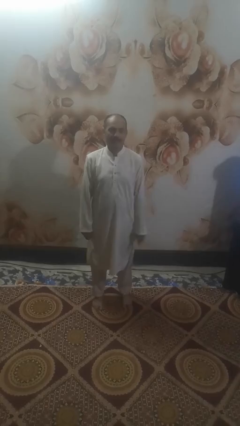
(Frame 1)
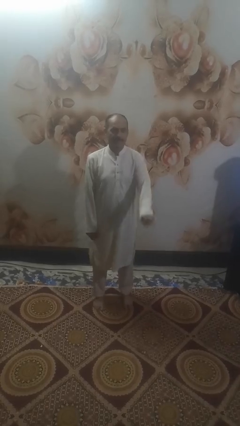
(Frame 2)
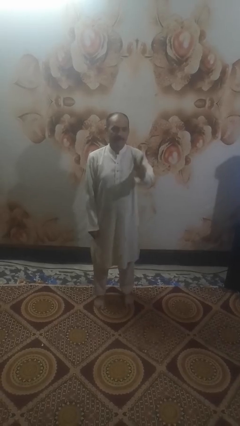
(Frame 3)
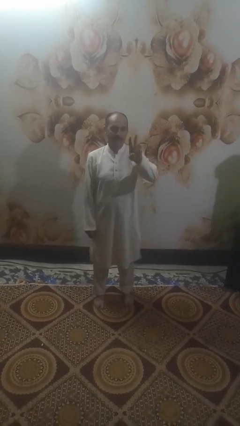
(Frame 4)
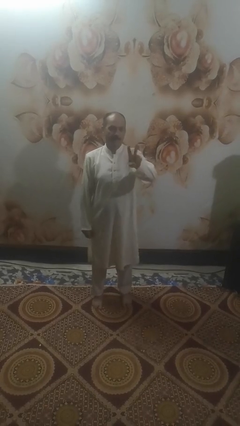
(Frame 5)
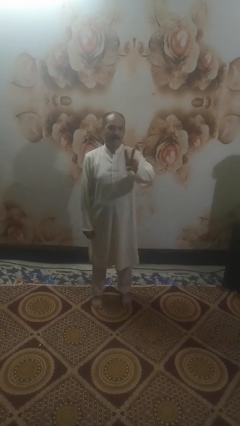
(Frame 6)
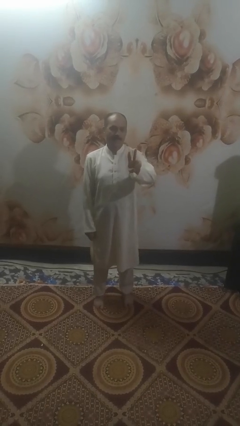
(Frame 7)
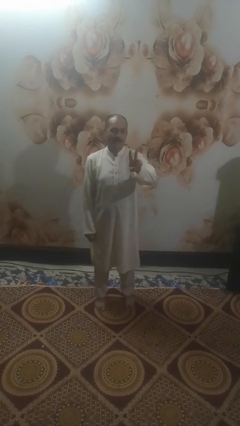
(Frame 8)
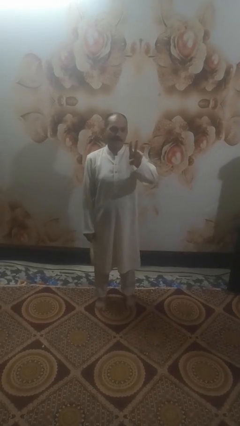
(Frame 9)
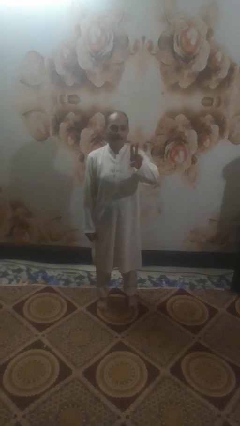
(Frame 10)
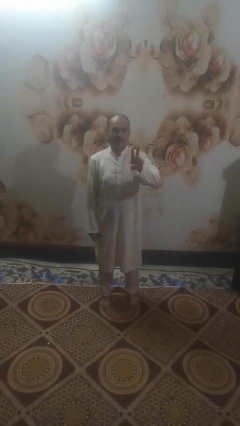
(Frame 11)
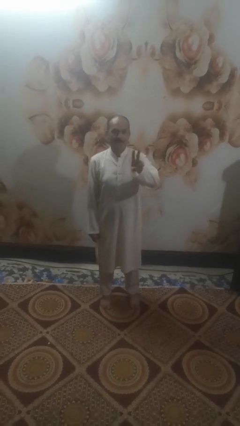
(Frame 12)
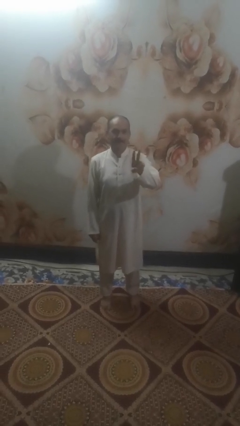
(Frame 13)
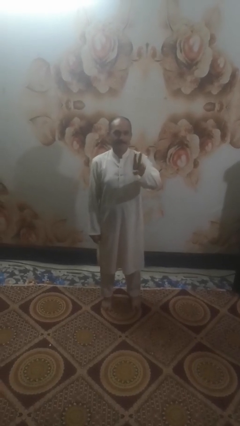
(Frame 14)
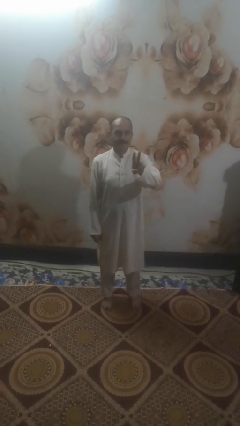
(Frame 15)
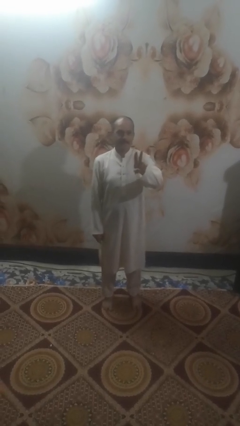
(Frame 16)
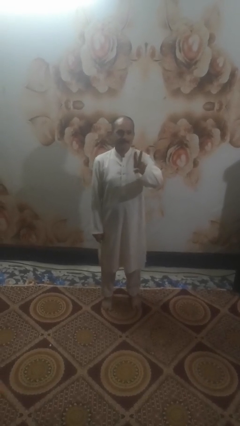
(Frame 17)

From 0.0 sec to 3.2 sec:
person gestures peace

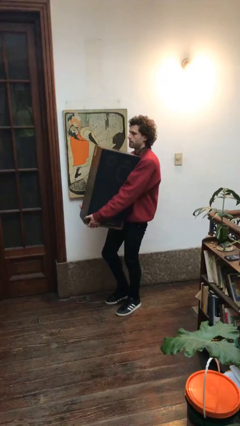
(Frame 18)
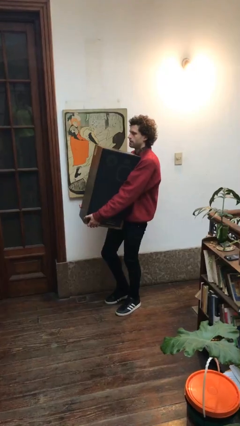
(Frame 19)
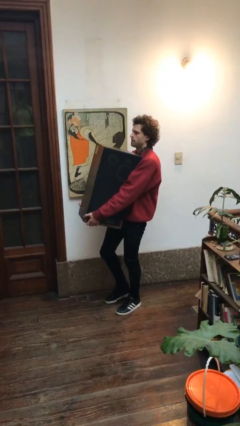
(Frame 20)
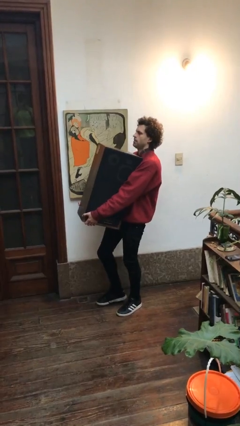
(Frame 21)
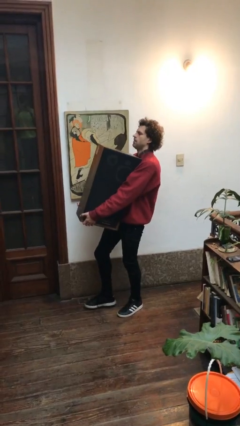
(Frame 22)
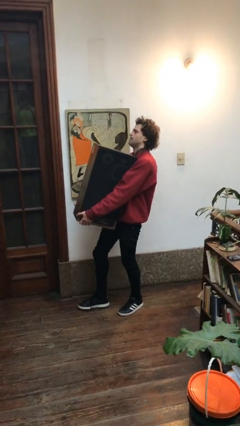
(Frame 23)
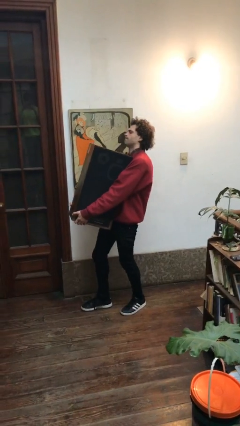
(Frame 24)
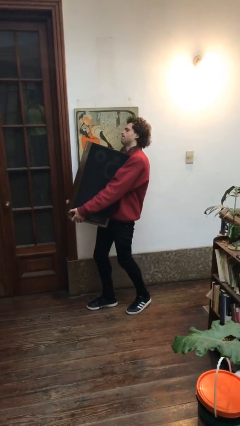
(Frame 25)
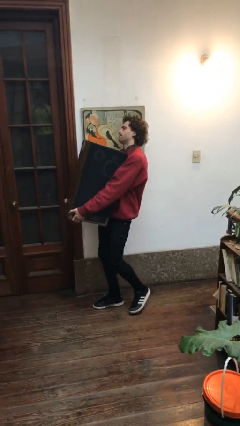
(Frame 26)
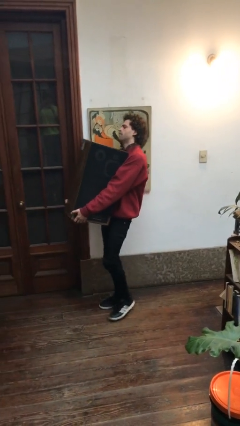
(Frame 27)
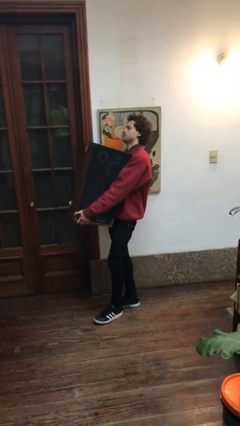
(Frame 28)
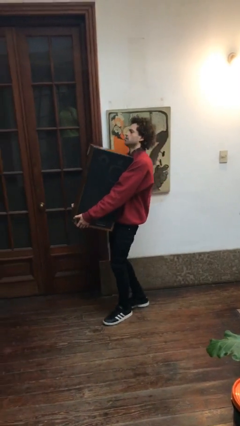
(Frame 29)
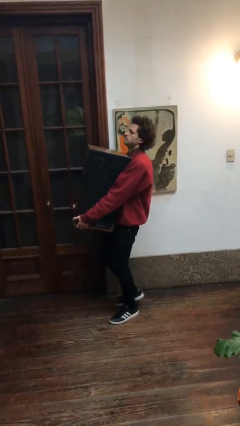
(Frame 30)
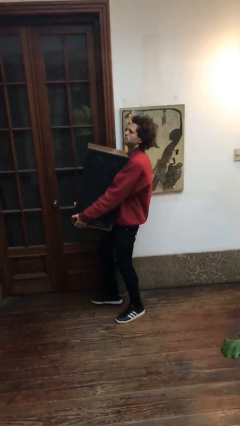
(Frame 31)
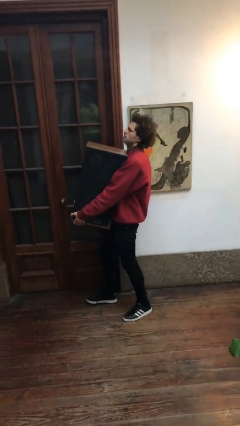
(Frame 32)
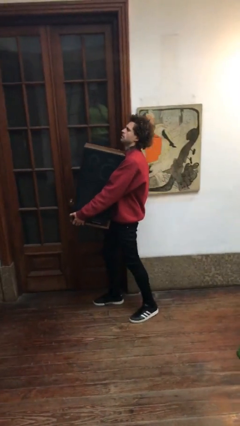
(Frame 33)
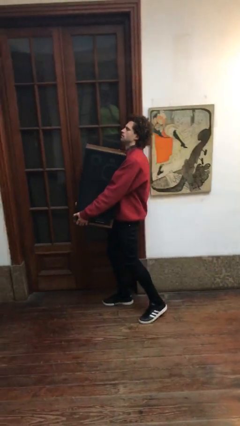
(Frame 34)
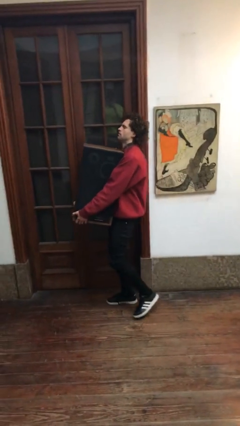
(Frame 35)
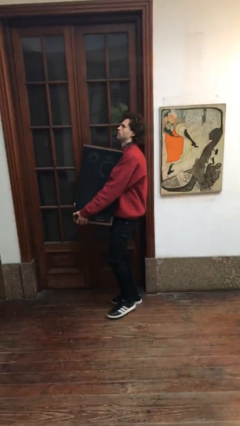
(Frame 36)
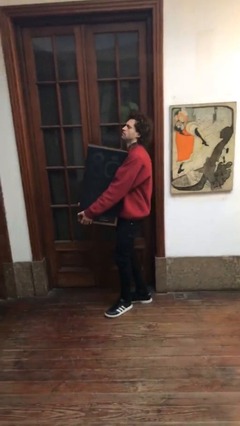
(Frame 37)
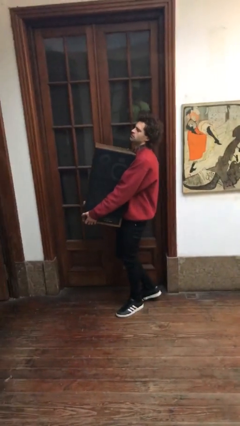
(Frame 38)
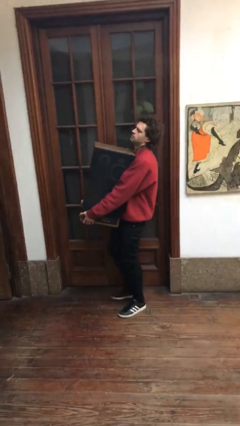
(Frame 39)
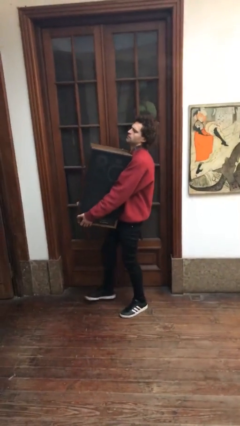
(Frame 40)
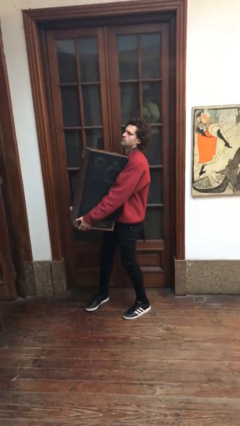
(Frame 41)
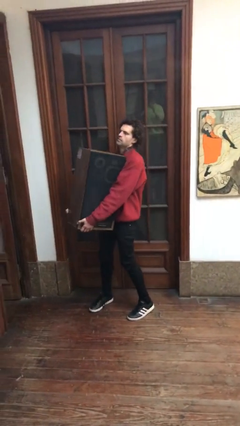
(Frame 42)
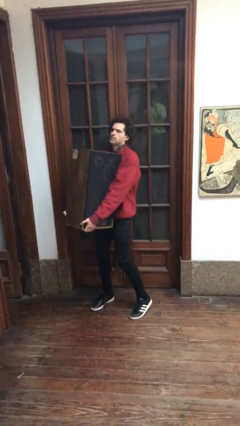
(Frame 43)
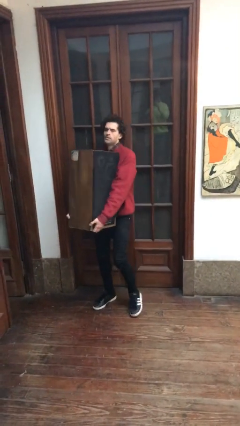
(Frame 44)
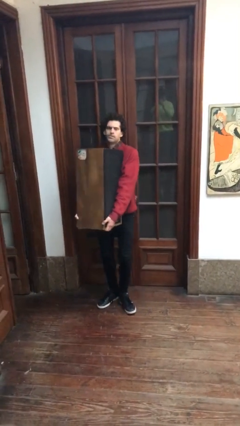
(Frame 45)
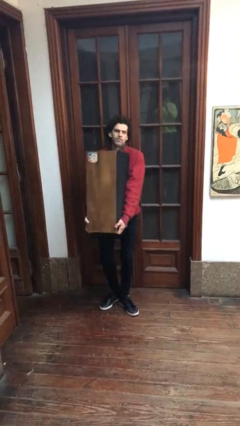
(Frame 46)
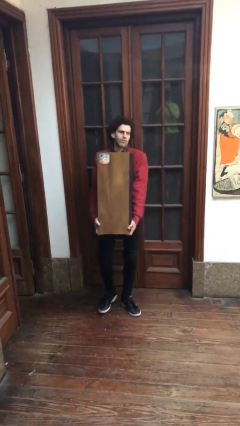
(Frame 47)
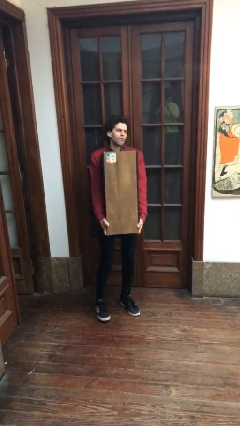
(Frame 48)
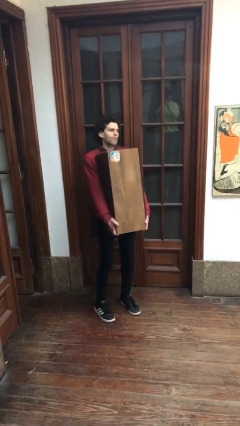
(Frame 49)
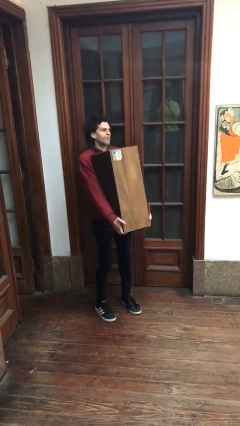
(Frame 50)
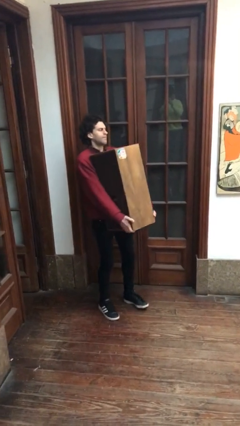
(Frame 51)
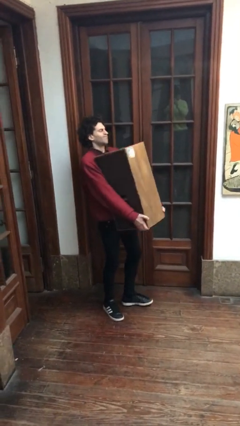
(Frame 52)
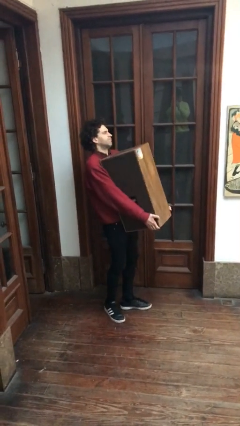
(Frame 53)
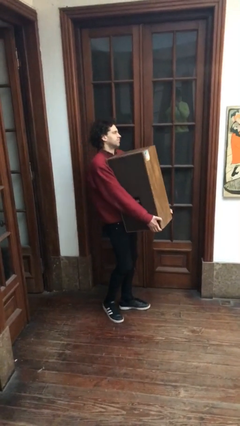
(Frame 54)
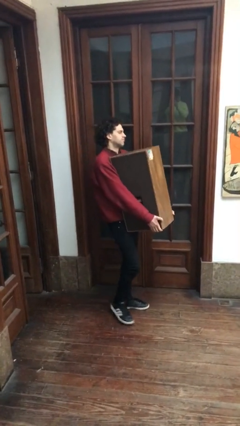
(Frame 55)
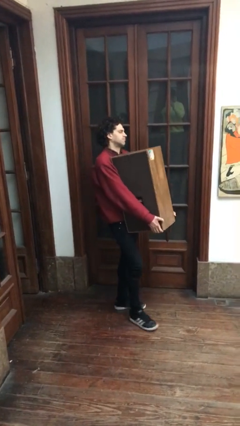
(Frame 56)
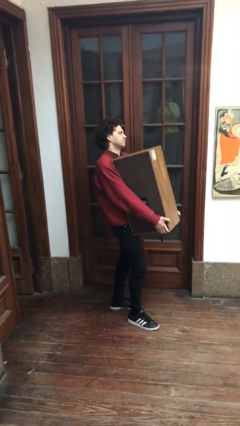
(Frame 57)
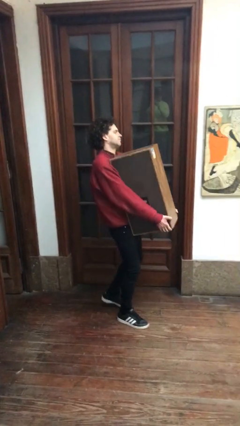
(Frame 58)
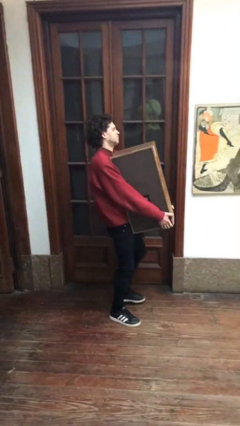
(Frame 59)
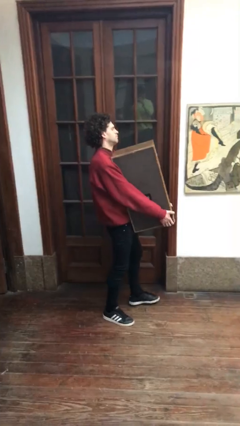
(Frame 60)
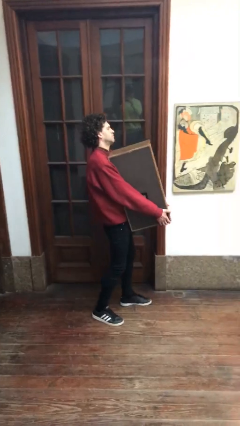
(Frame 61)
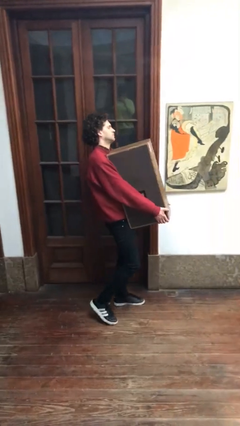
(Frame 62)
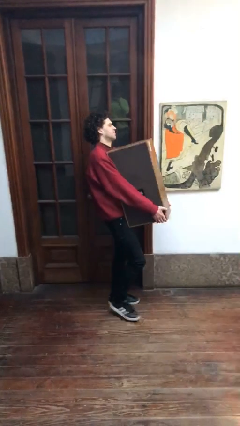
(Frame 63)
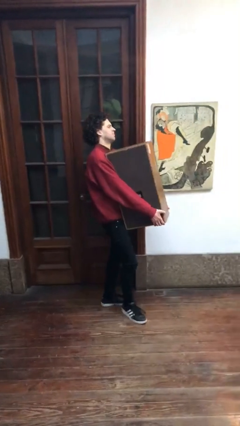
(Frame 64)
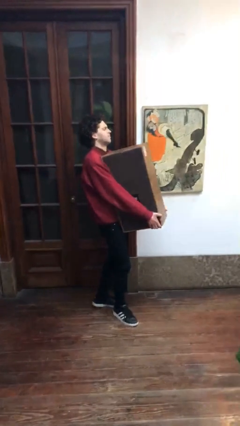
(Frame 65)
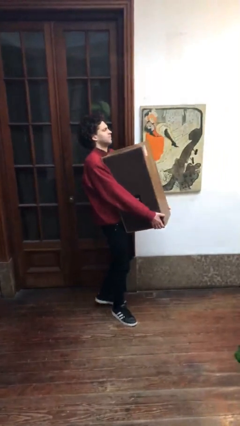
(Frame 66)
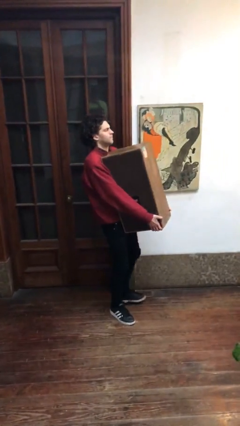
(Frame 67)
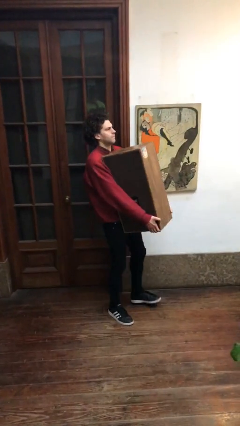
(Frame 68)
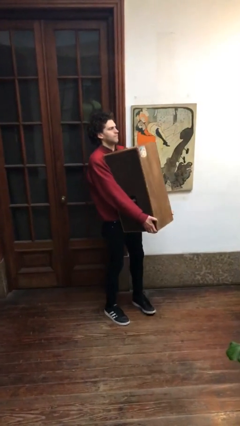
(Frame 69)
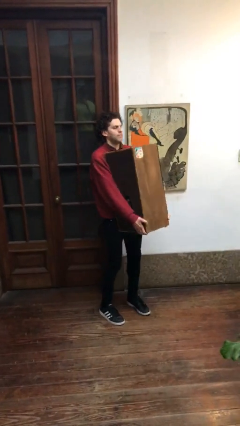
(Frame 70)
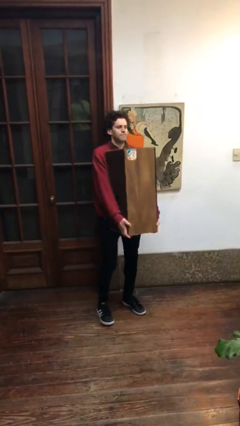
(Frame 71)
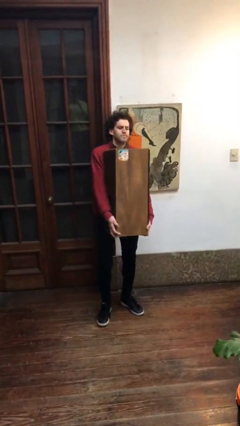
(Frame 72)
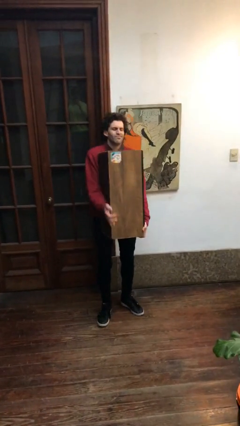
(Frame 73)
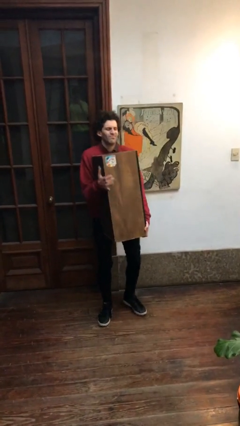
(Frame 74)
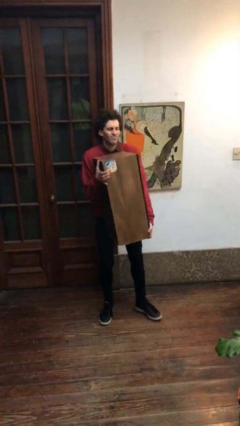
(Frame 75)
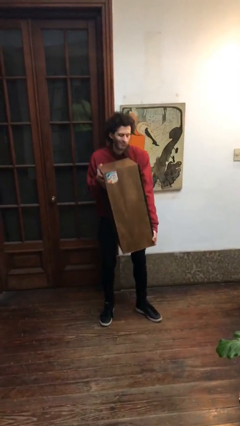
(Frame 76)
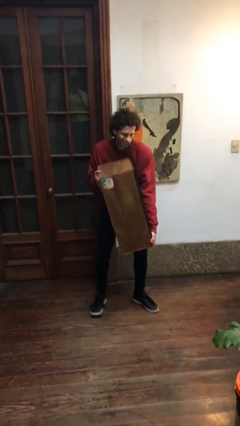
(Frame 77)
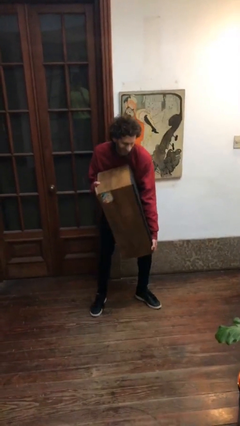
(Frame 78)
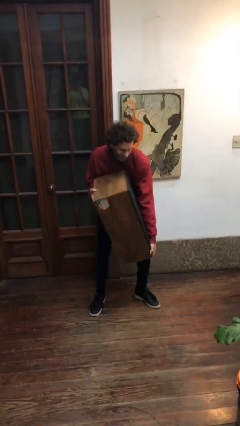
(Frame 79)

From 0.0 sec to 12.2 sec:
person carries heavy object

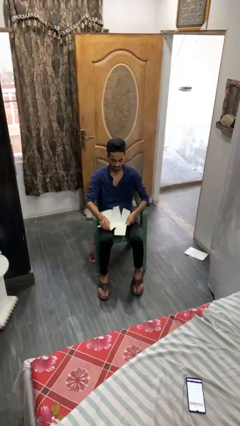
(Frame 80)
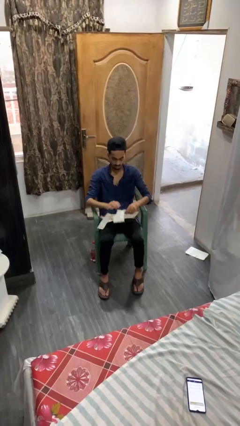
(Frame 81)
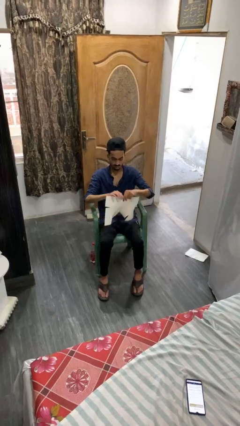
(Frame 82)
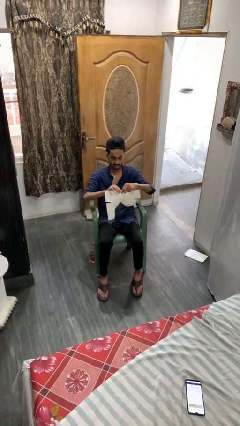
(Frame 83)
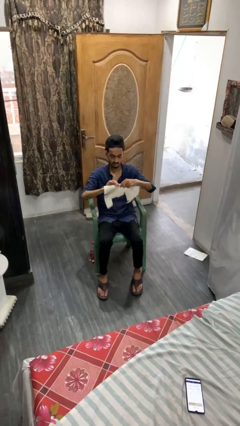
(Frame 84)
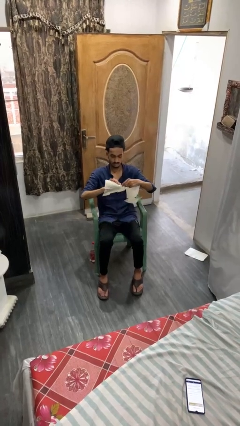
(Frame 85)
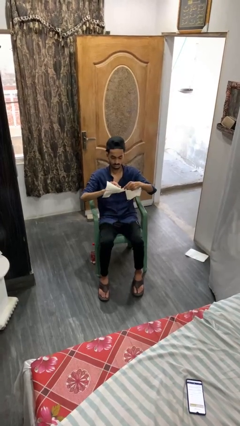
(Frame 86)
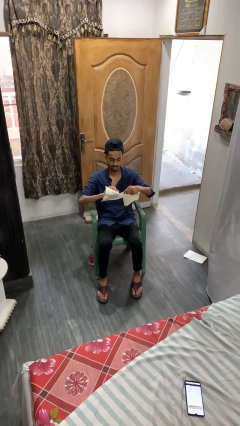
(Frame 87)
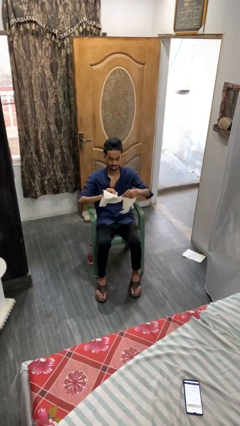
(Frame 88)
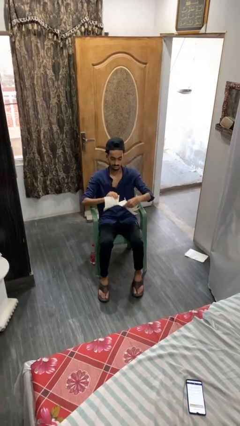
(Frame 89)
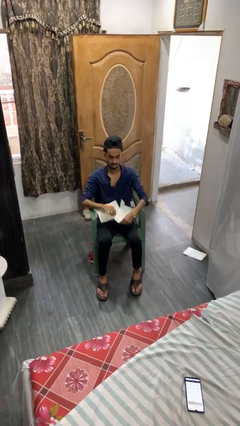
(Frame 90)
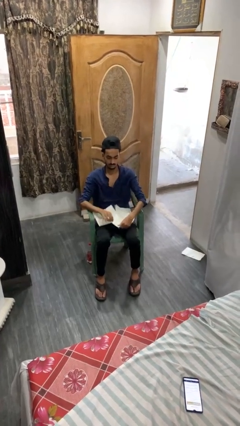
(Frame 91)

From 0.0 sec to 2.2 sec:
person tears paper

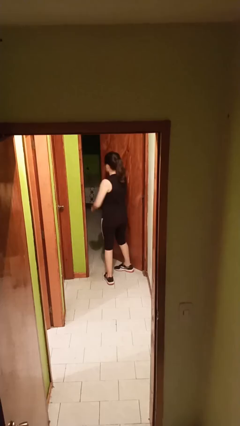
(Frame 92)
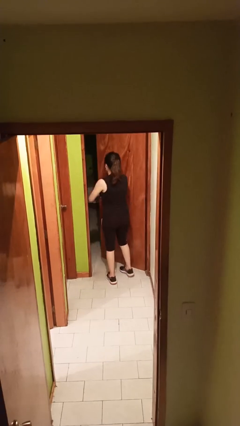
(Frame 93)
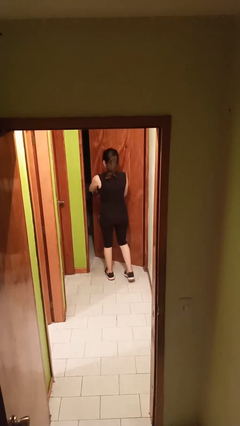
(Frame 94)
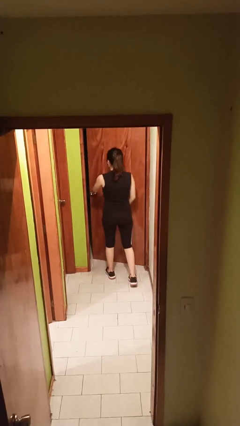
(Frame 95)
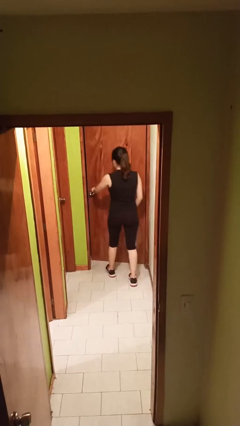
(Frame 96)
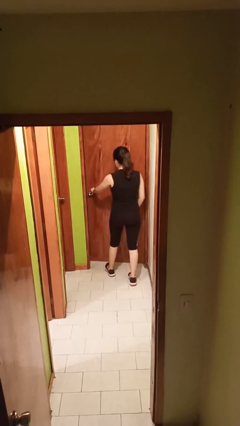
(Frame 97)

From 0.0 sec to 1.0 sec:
person closes facility door
